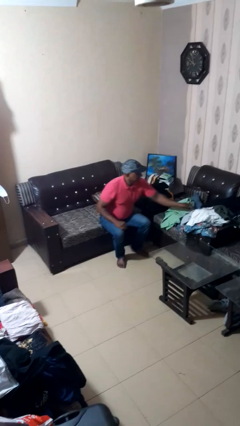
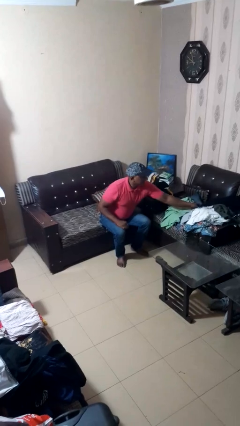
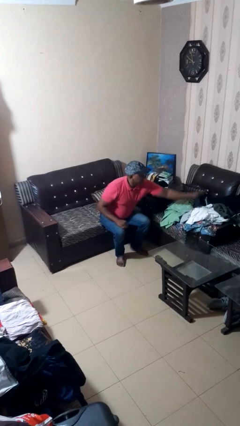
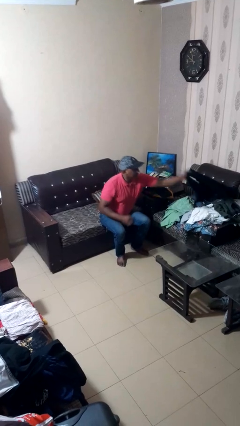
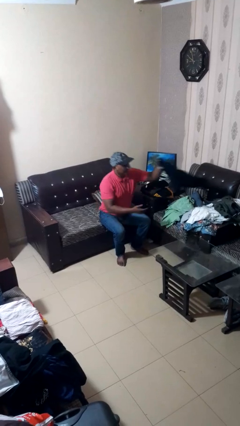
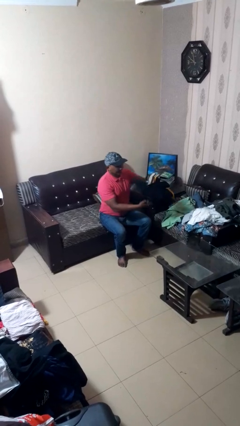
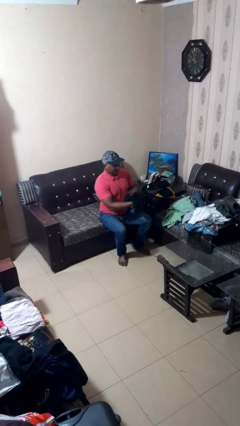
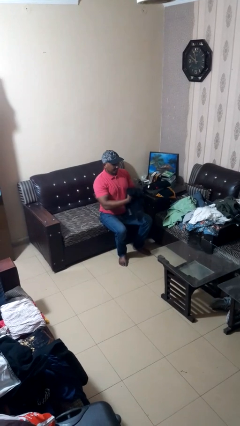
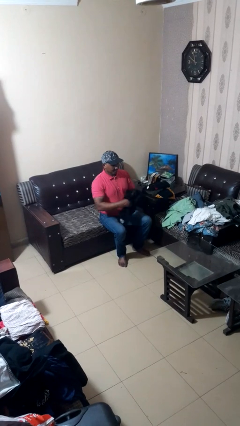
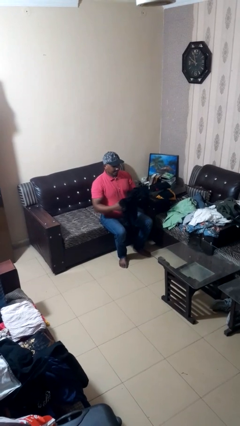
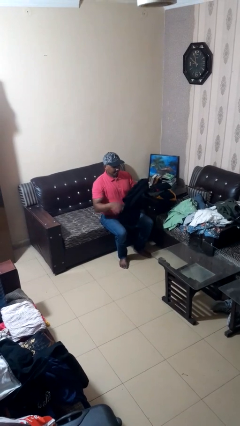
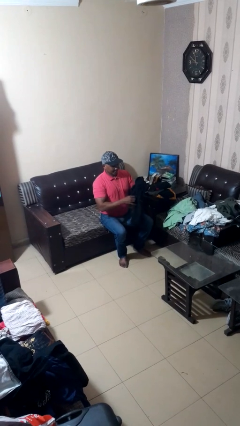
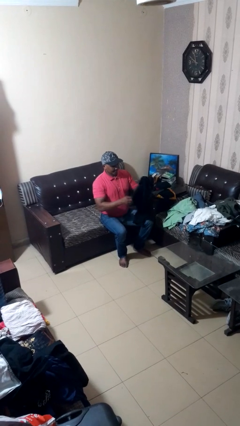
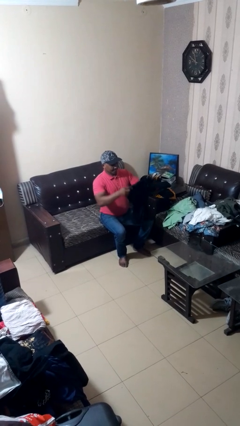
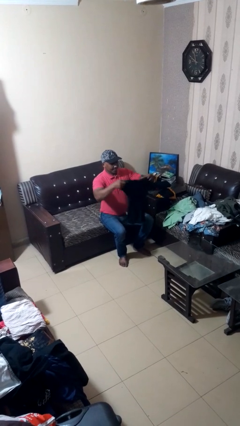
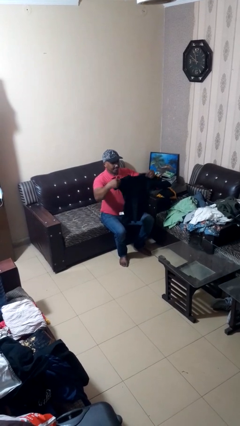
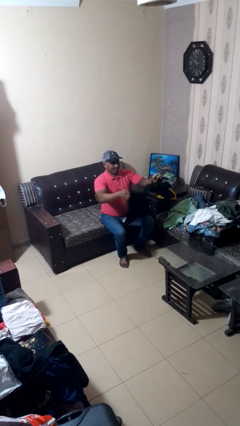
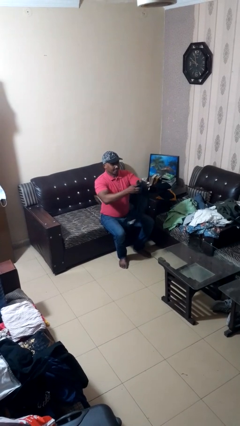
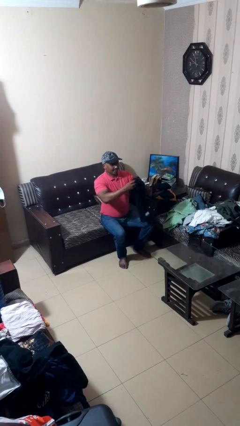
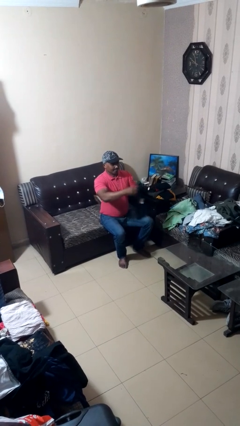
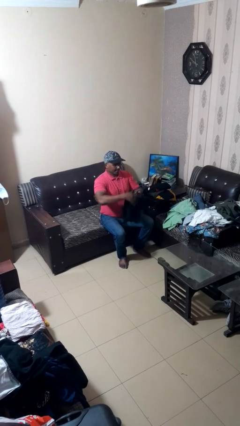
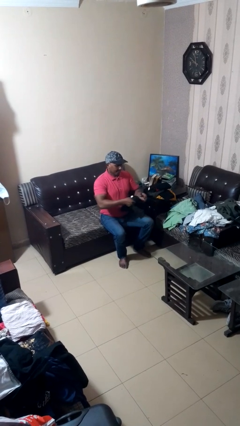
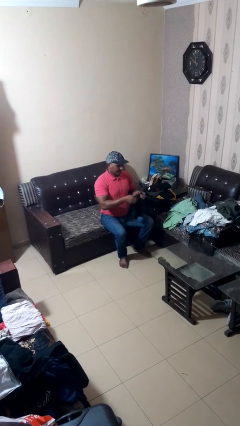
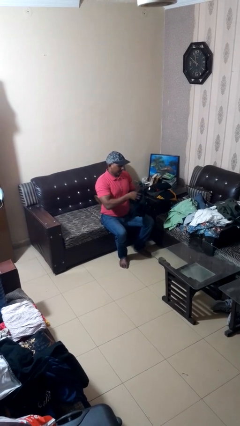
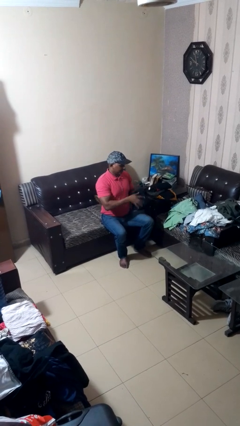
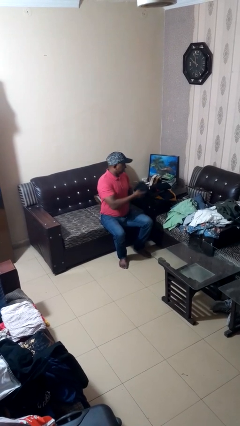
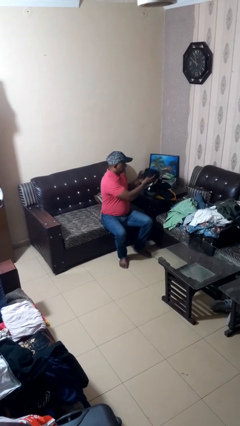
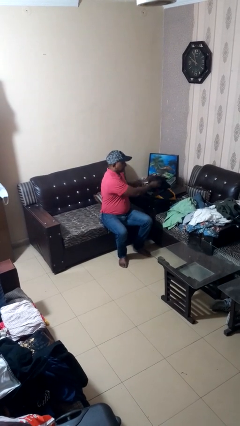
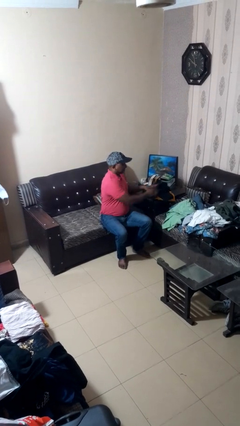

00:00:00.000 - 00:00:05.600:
person folds shirt

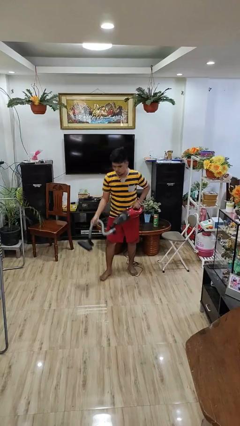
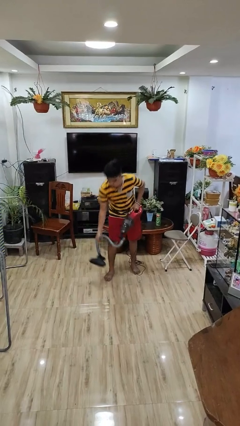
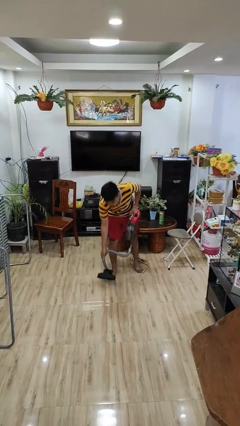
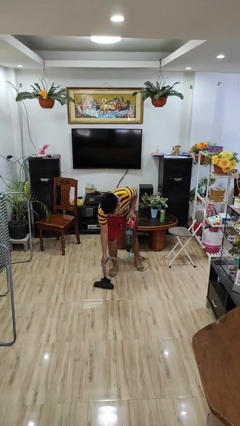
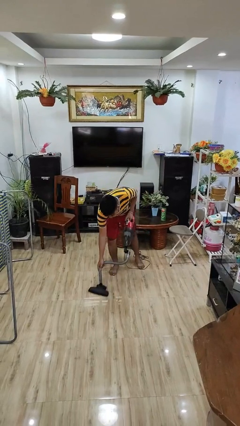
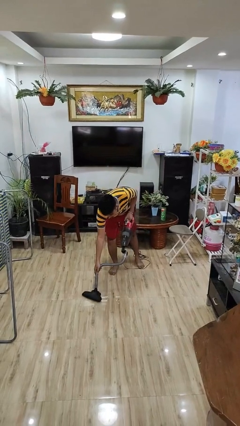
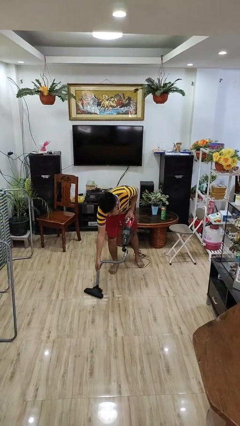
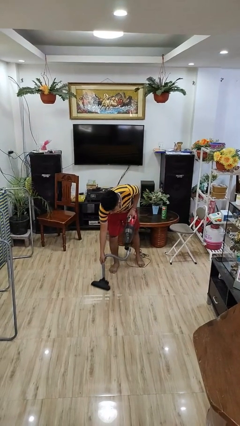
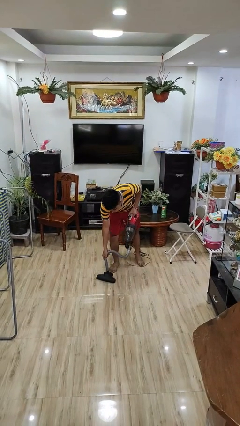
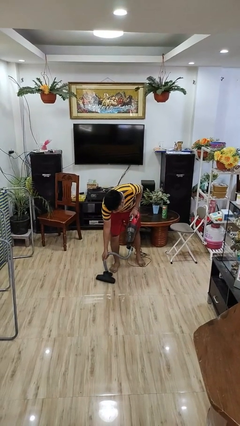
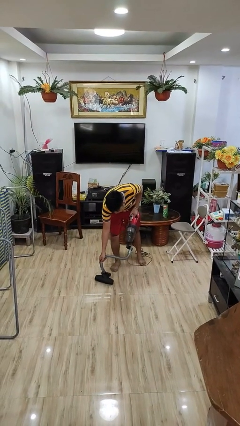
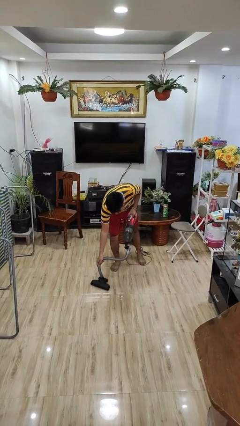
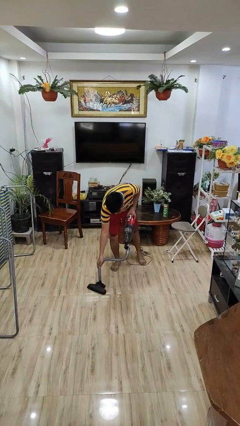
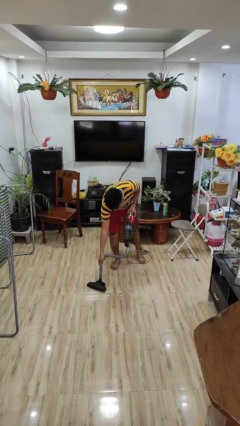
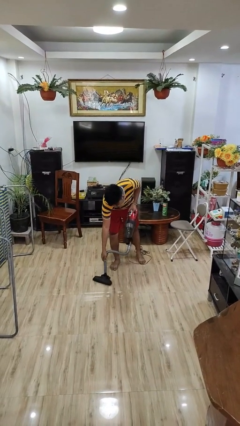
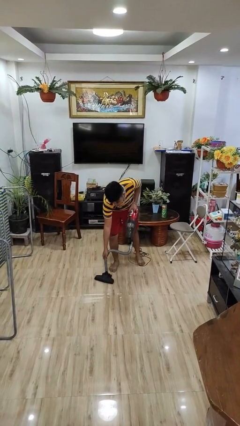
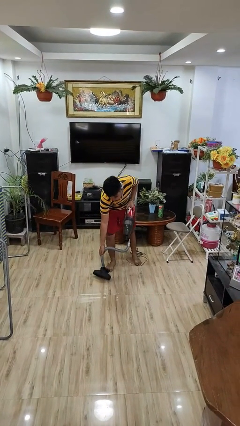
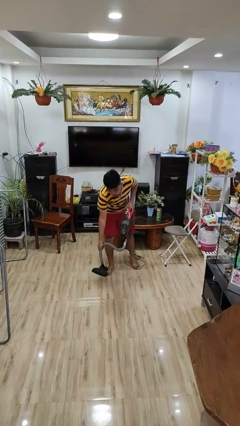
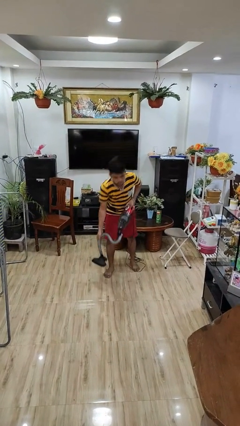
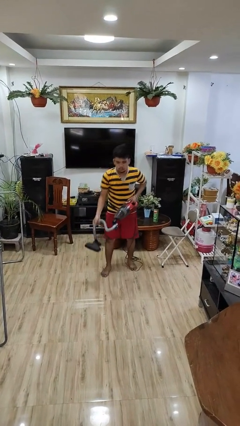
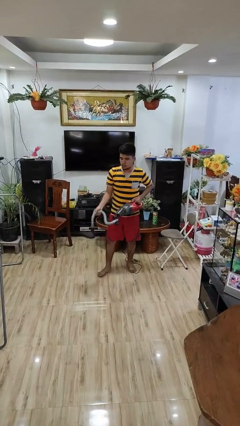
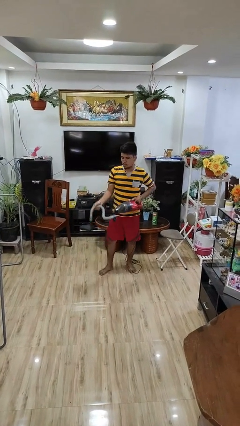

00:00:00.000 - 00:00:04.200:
person vacuums carpet

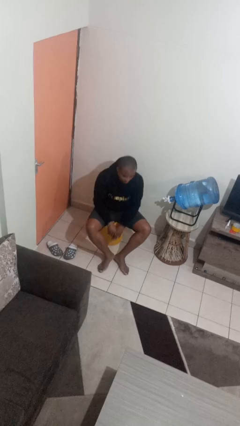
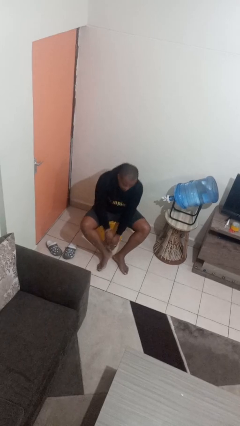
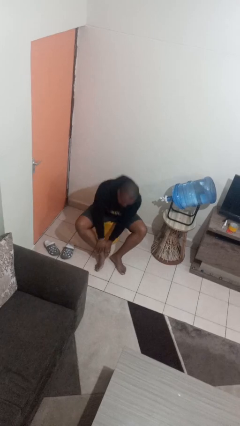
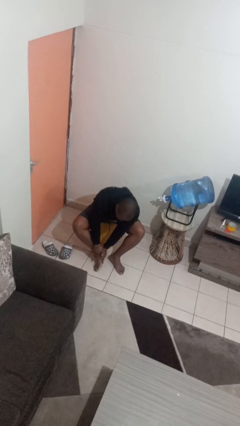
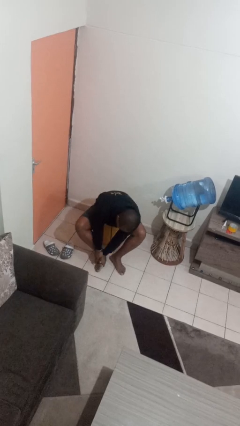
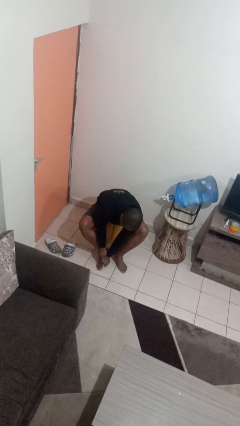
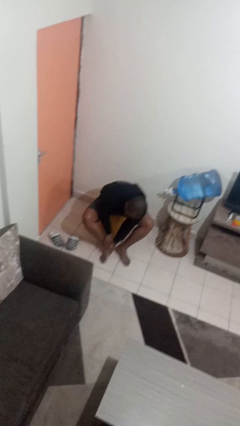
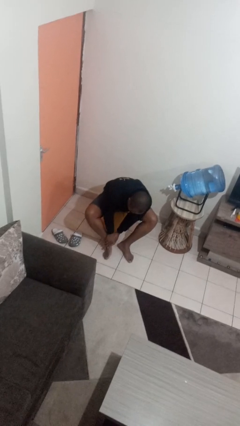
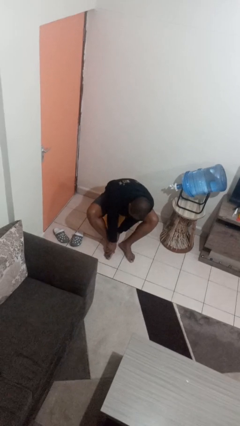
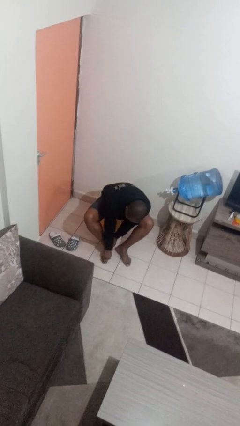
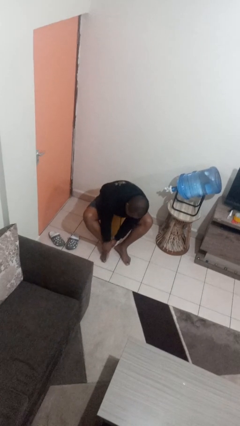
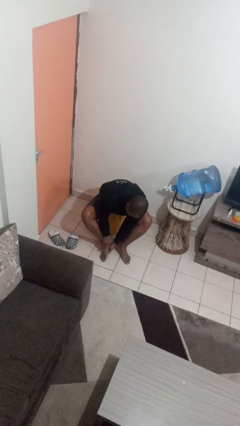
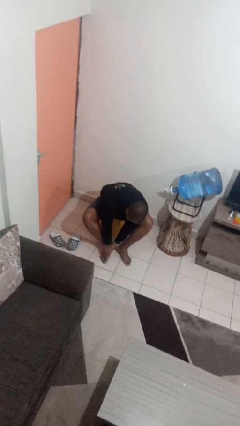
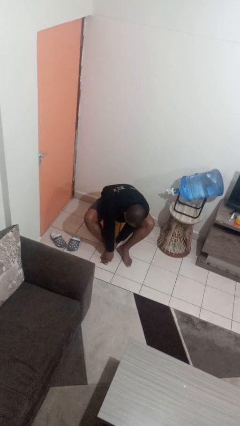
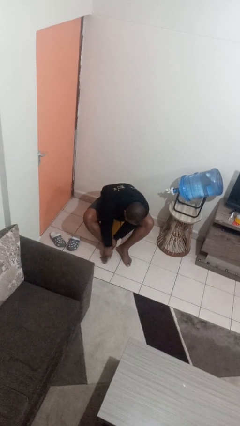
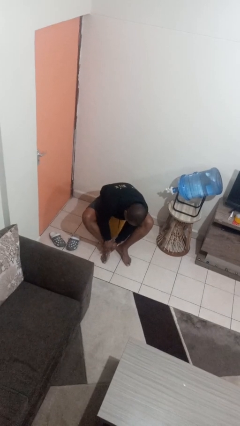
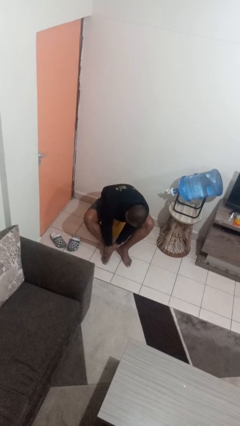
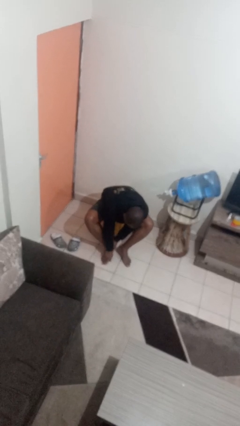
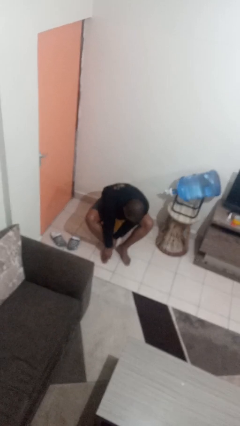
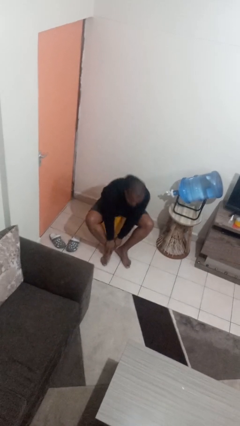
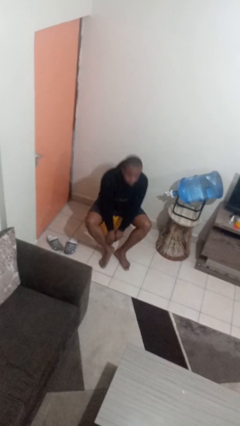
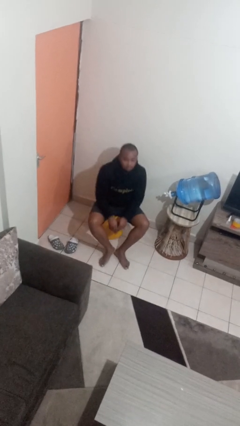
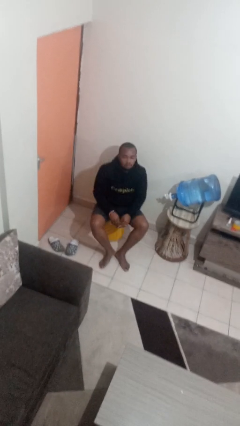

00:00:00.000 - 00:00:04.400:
person rubs foot

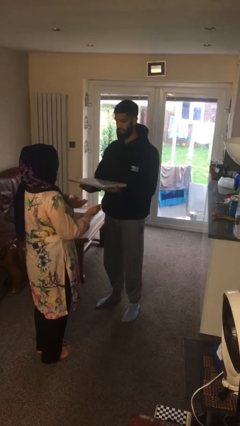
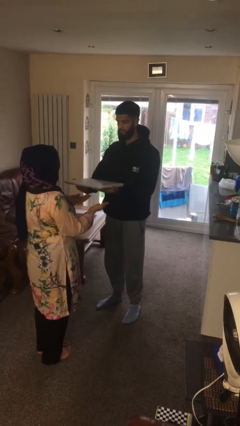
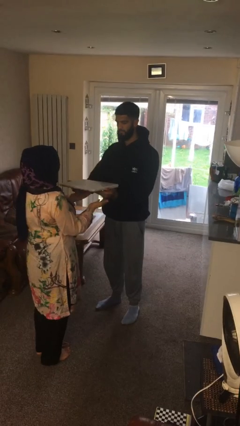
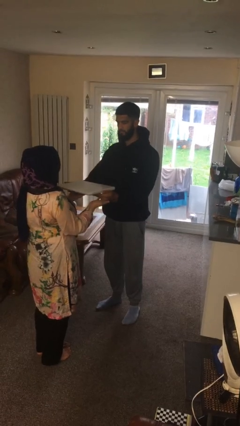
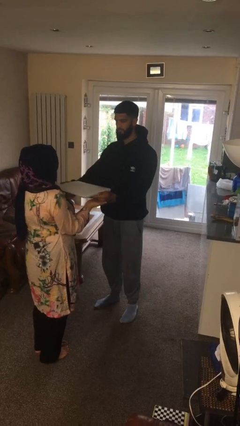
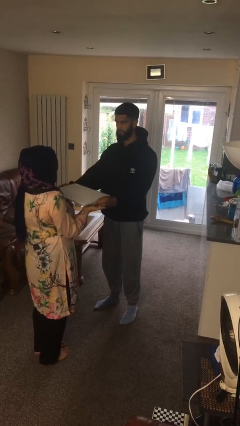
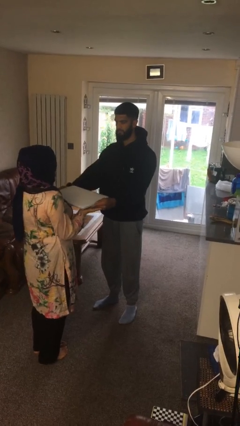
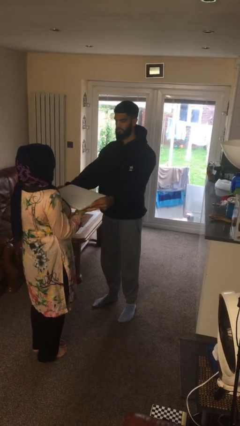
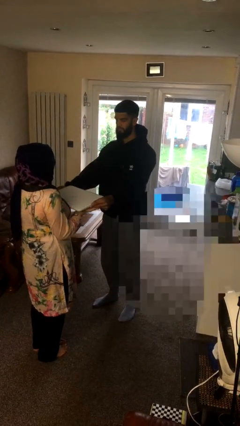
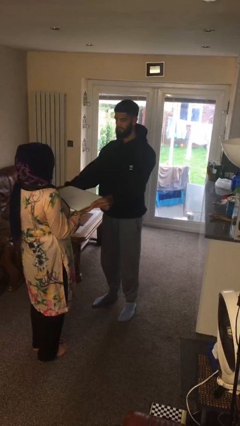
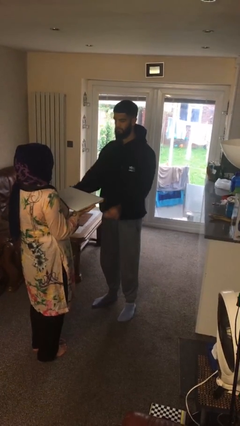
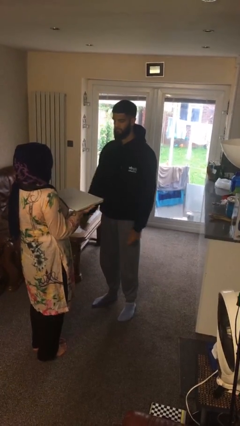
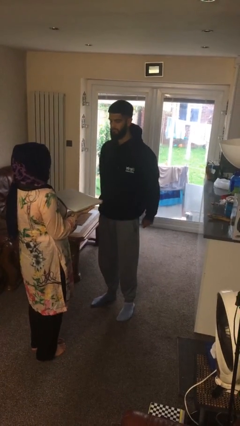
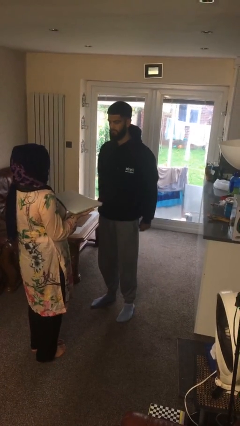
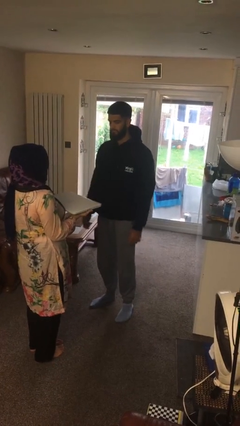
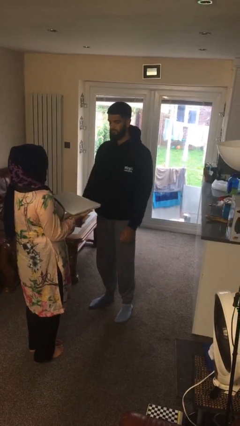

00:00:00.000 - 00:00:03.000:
person transfers object to person
